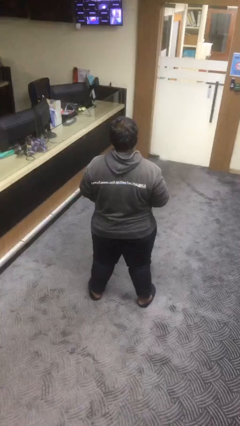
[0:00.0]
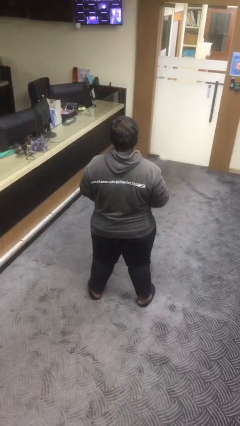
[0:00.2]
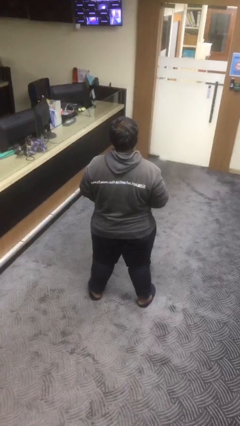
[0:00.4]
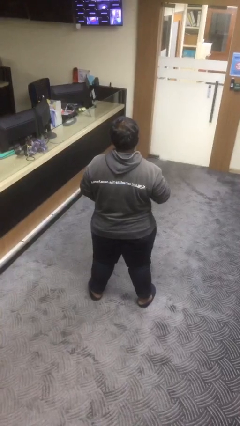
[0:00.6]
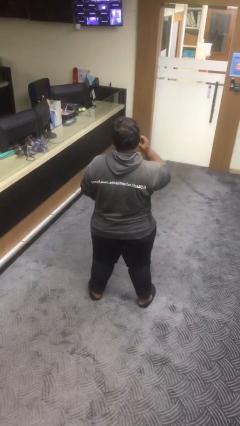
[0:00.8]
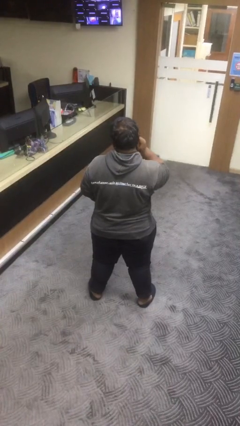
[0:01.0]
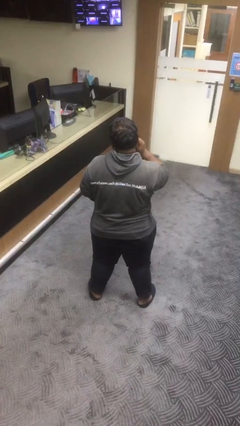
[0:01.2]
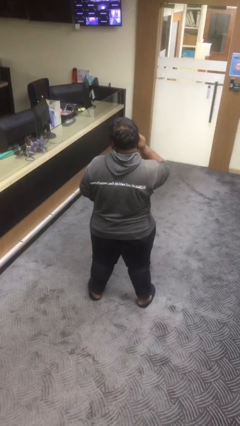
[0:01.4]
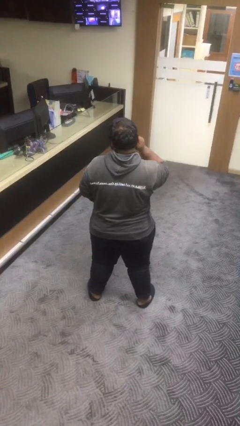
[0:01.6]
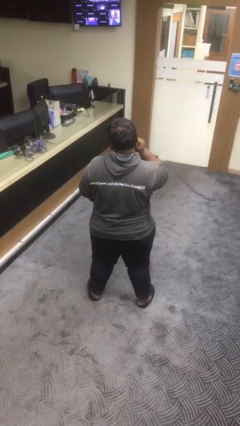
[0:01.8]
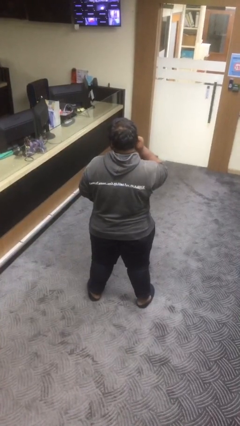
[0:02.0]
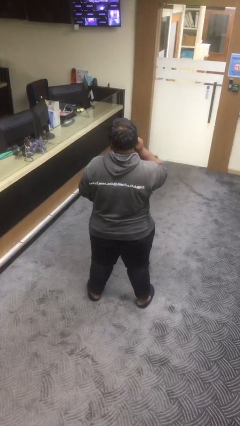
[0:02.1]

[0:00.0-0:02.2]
person touches earlobe

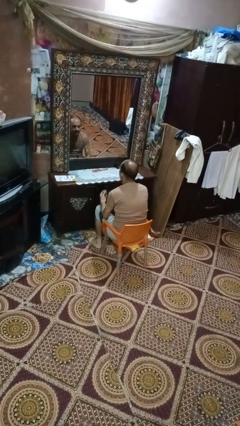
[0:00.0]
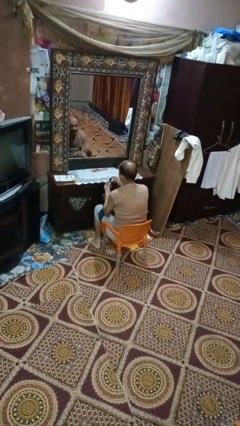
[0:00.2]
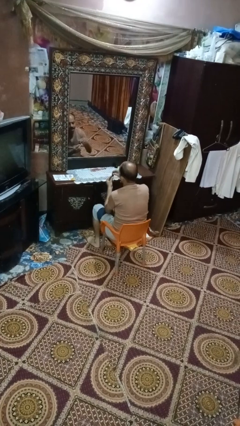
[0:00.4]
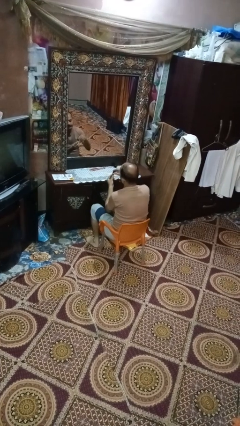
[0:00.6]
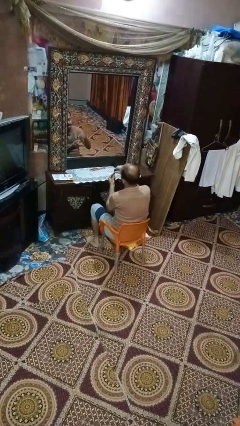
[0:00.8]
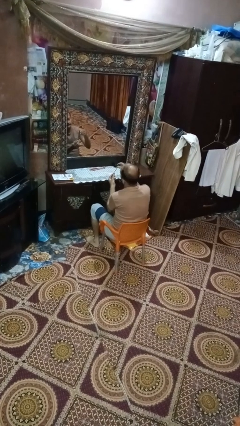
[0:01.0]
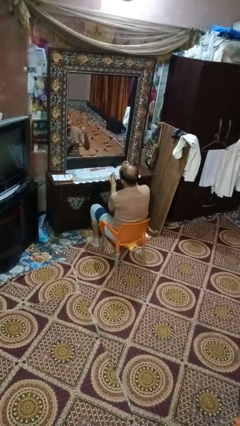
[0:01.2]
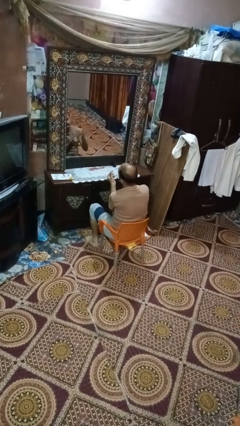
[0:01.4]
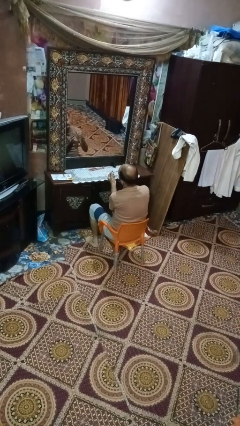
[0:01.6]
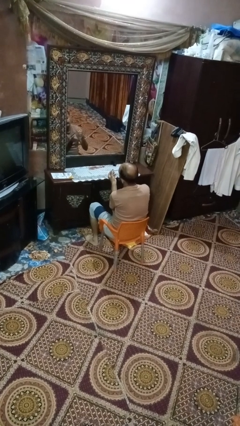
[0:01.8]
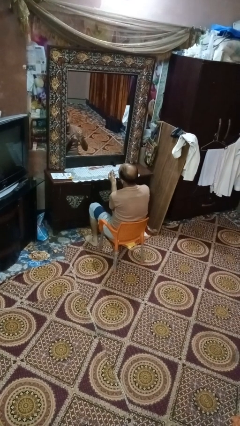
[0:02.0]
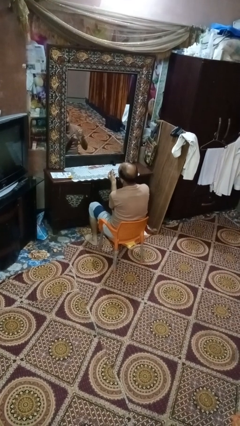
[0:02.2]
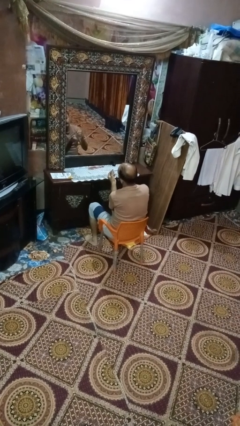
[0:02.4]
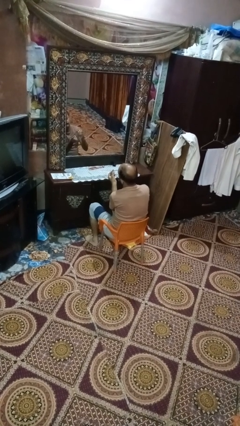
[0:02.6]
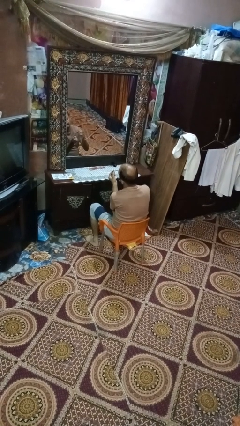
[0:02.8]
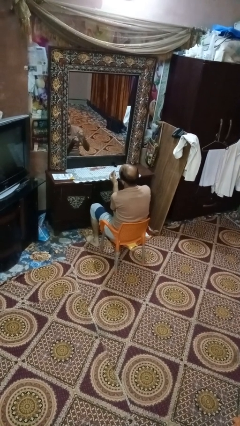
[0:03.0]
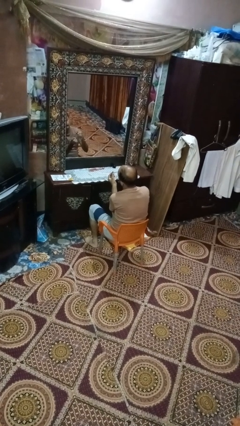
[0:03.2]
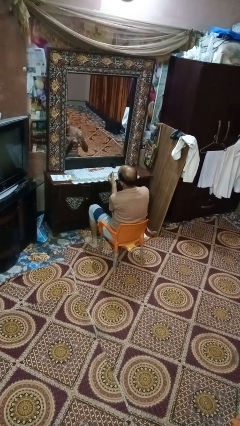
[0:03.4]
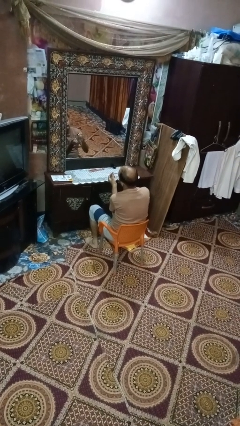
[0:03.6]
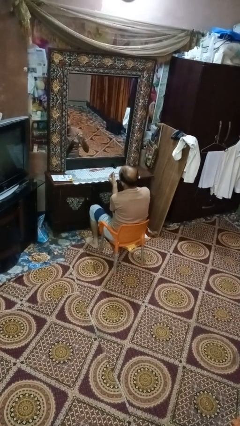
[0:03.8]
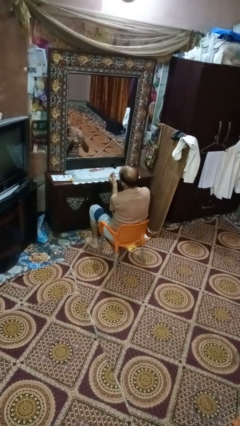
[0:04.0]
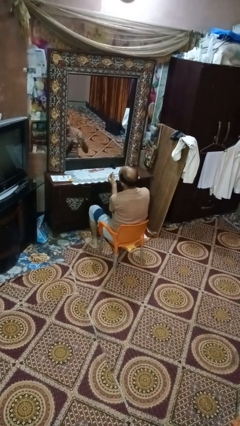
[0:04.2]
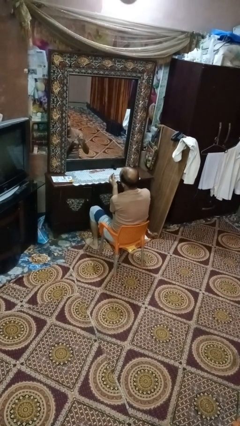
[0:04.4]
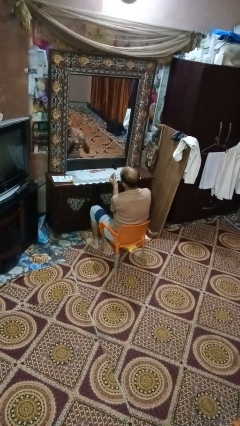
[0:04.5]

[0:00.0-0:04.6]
person paints fingernails

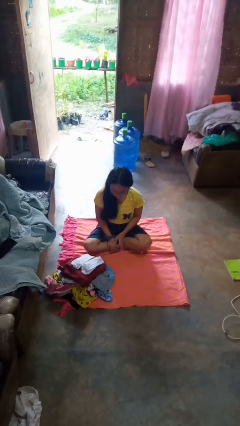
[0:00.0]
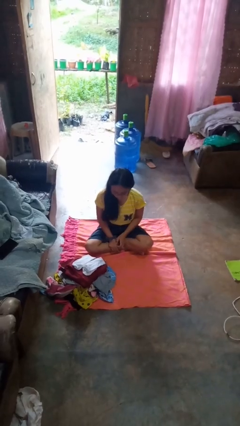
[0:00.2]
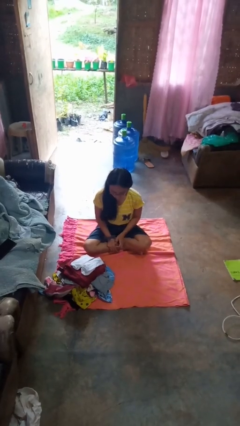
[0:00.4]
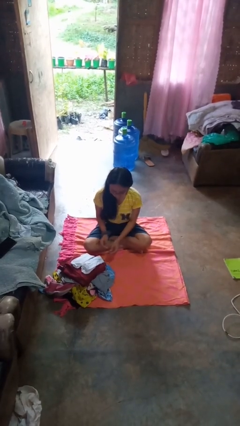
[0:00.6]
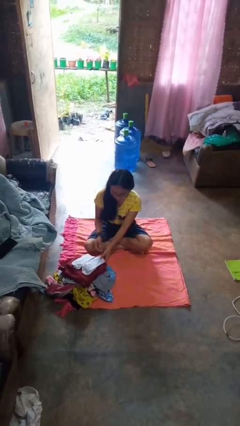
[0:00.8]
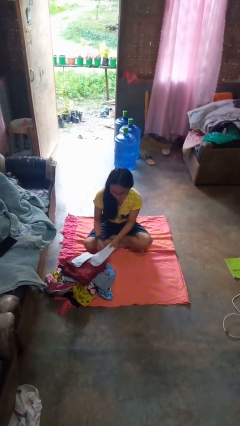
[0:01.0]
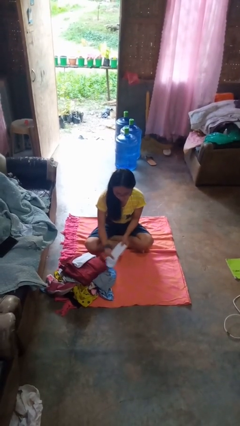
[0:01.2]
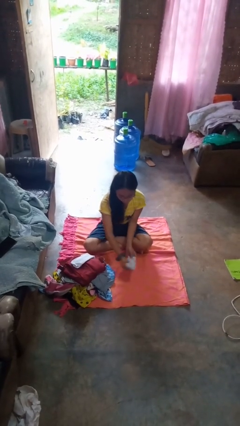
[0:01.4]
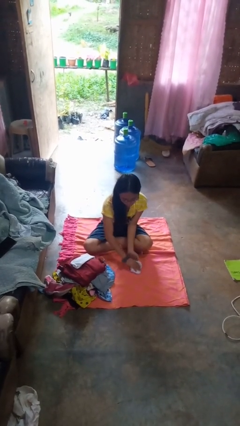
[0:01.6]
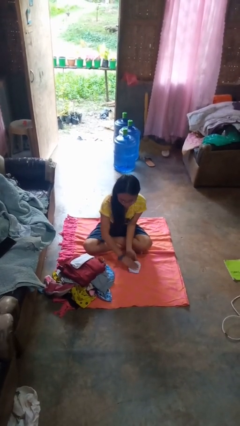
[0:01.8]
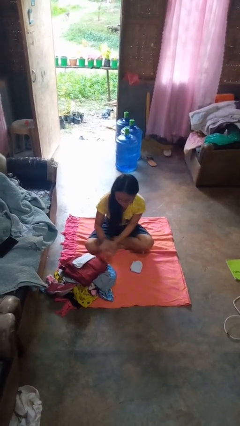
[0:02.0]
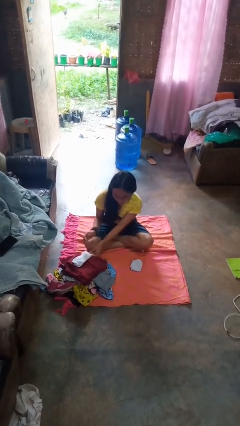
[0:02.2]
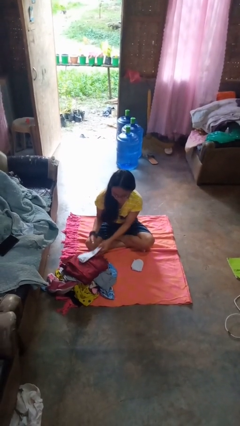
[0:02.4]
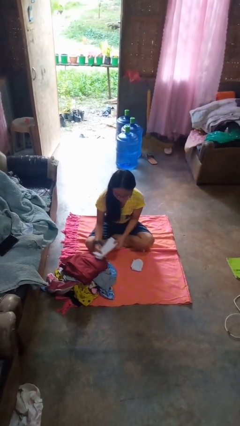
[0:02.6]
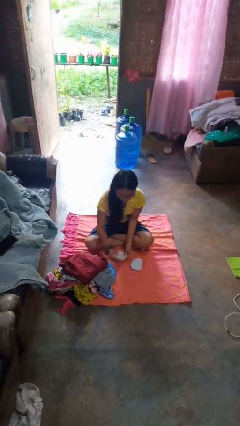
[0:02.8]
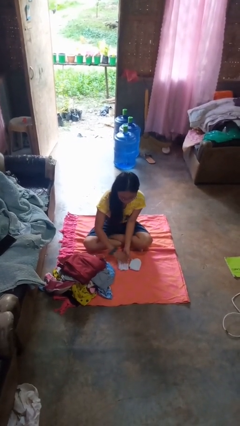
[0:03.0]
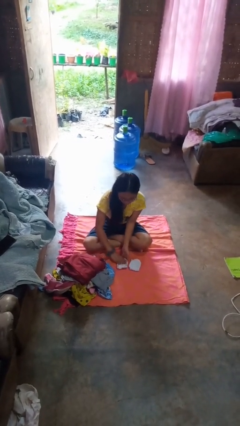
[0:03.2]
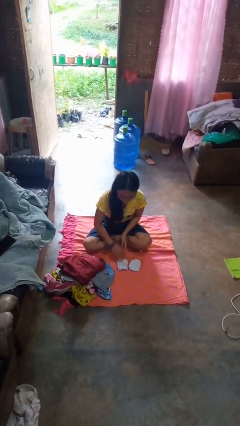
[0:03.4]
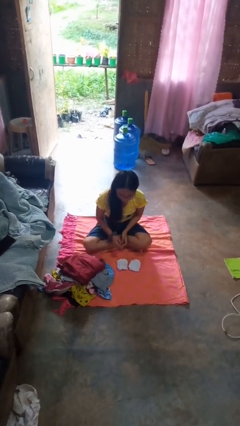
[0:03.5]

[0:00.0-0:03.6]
person folds socks

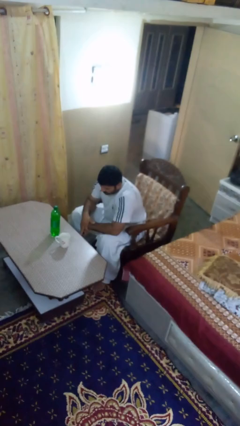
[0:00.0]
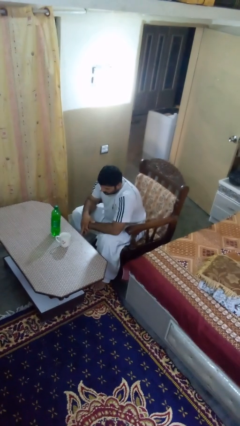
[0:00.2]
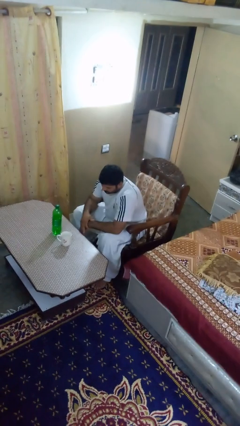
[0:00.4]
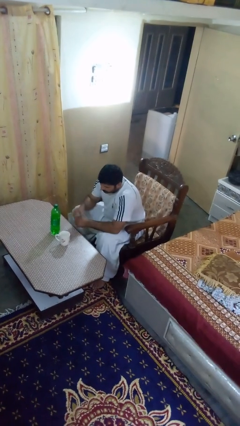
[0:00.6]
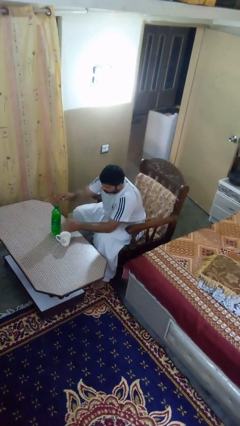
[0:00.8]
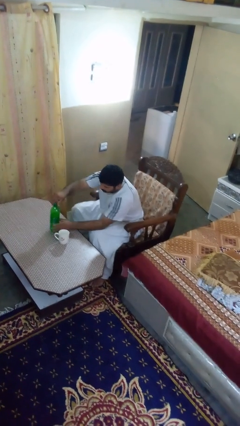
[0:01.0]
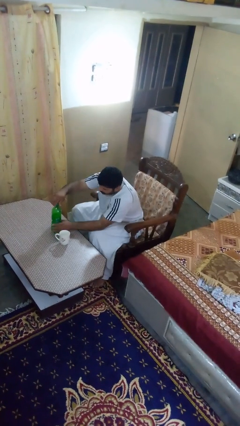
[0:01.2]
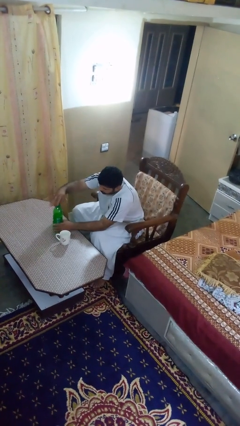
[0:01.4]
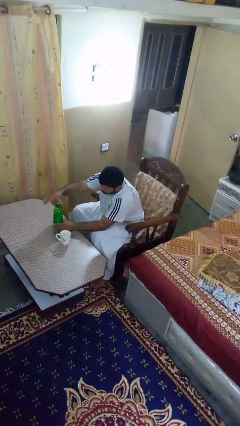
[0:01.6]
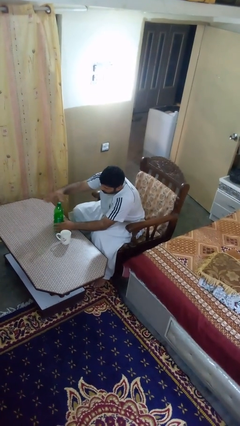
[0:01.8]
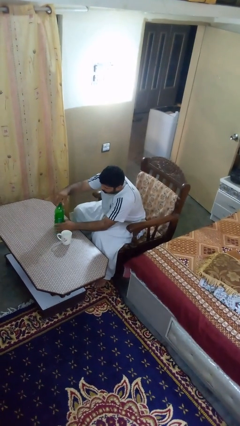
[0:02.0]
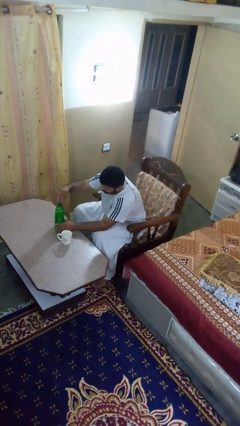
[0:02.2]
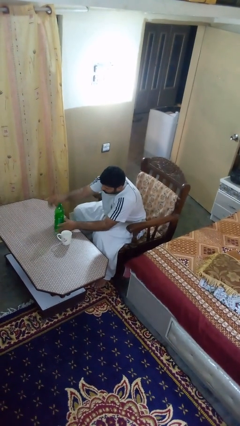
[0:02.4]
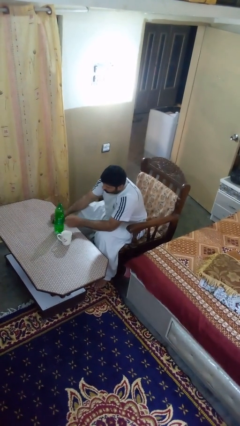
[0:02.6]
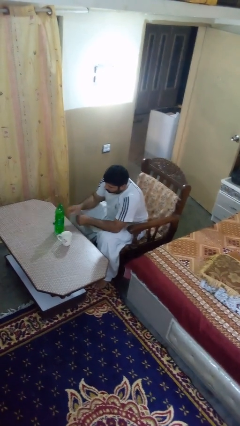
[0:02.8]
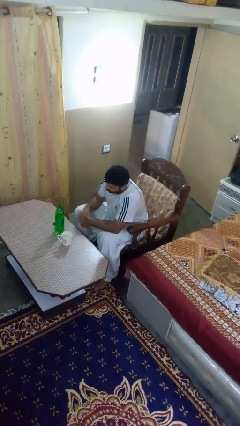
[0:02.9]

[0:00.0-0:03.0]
person unscrews lid from bottle

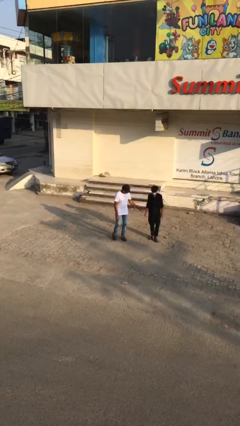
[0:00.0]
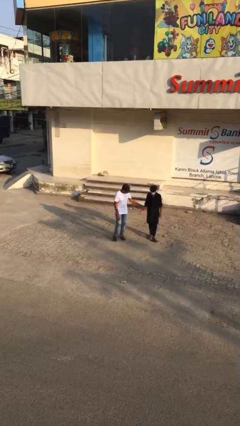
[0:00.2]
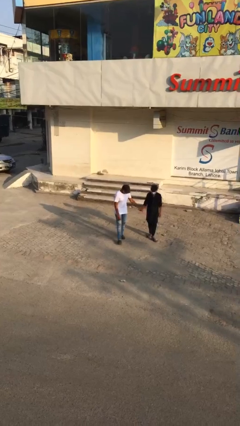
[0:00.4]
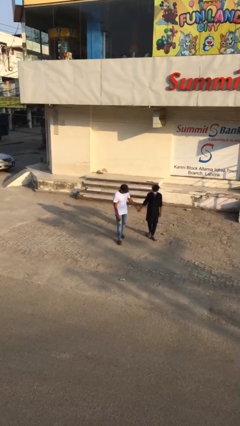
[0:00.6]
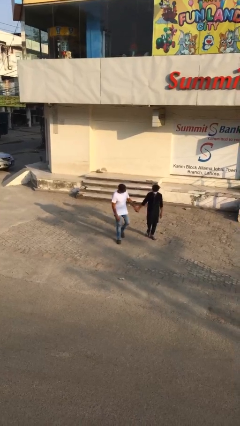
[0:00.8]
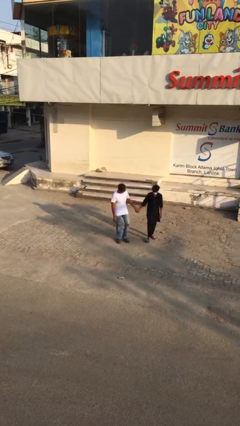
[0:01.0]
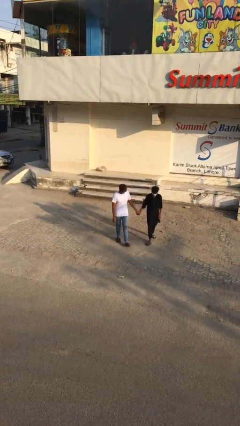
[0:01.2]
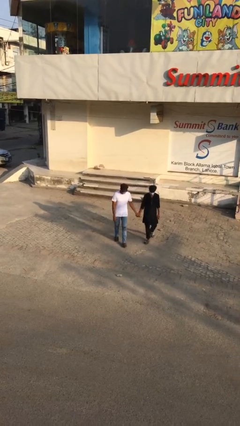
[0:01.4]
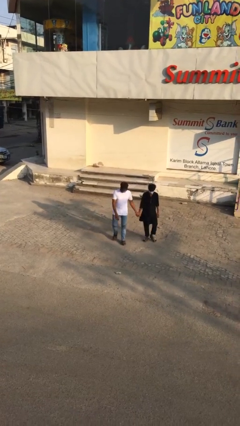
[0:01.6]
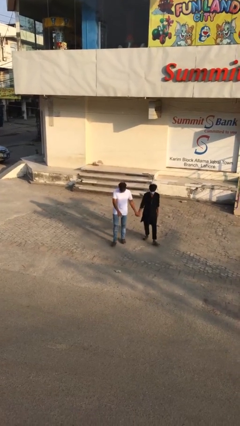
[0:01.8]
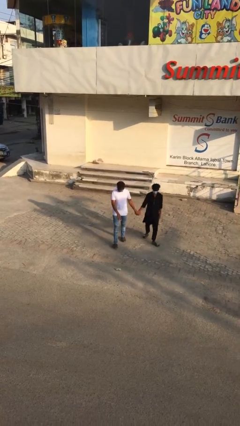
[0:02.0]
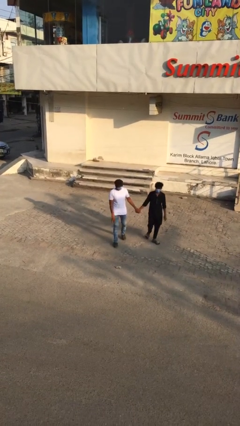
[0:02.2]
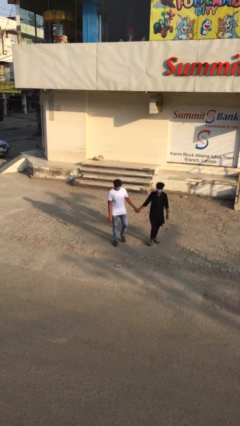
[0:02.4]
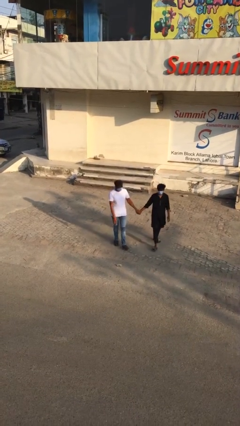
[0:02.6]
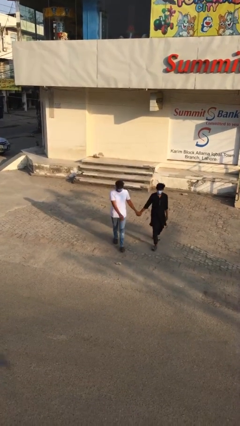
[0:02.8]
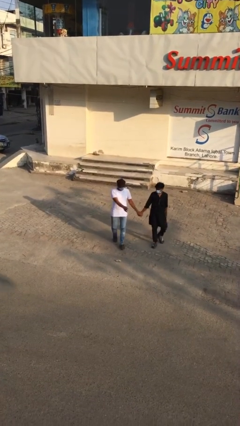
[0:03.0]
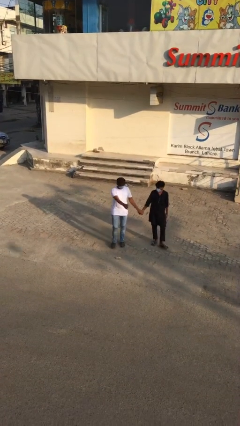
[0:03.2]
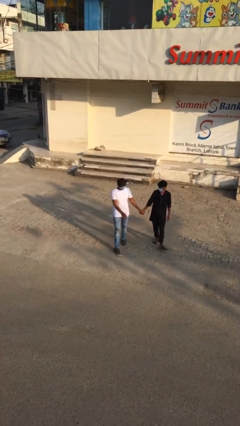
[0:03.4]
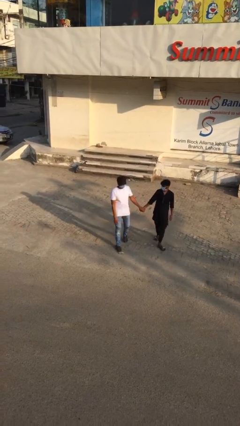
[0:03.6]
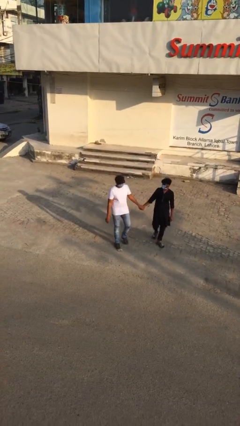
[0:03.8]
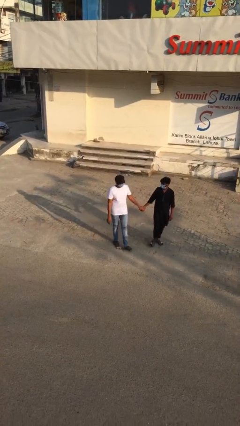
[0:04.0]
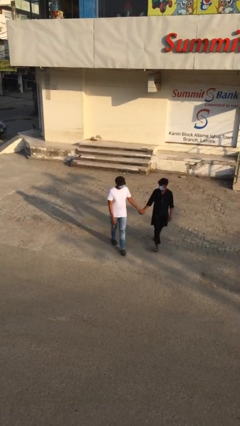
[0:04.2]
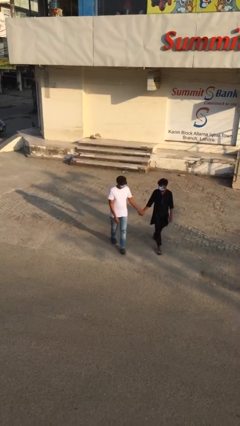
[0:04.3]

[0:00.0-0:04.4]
person holds hand
